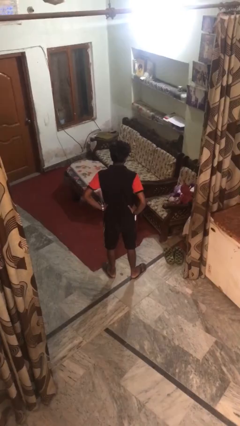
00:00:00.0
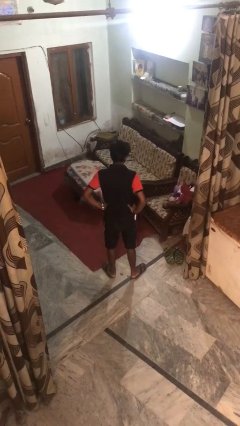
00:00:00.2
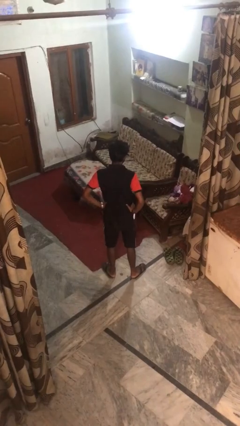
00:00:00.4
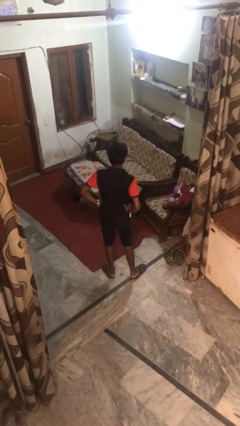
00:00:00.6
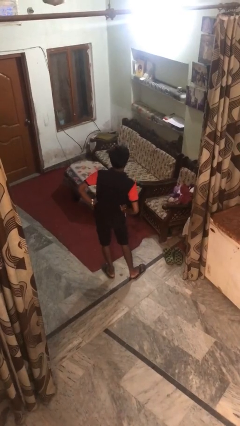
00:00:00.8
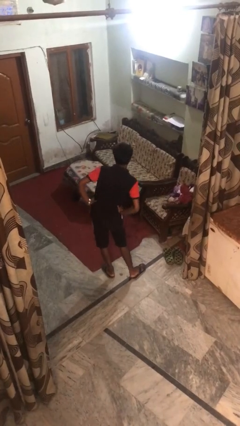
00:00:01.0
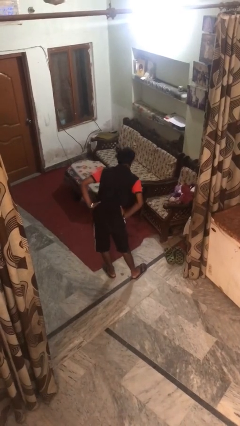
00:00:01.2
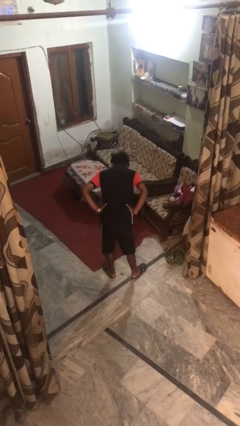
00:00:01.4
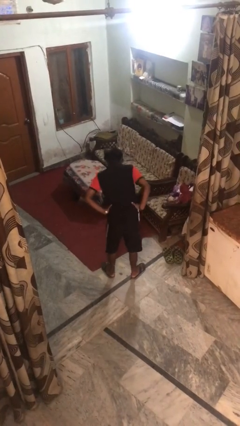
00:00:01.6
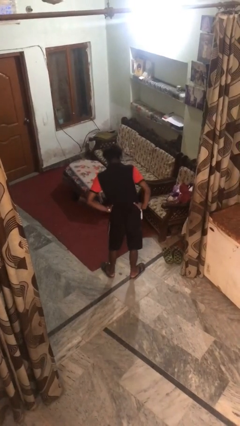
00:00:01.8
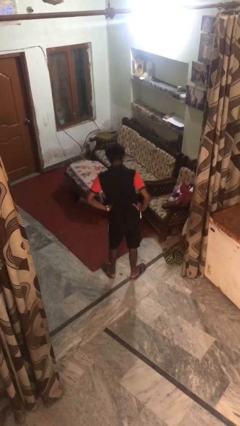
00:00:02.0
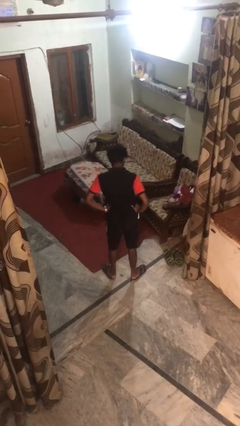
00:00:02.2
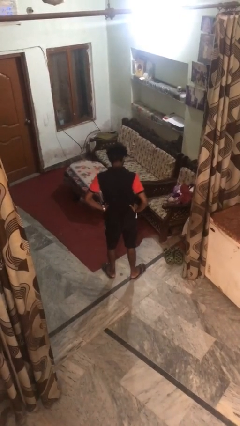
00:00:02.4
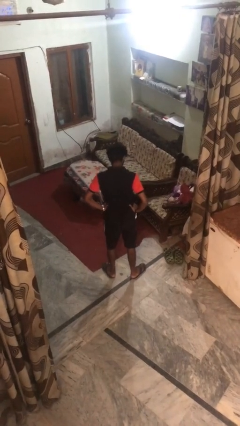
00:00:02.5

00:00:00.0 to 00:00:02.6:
person wiggles hips

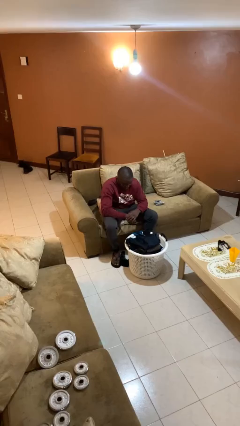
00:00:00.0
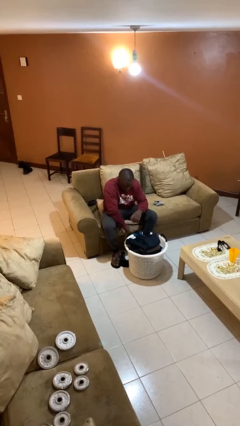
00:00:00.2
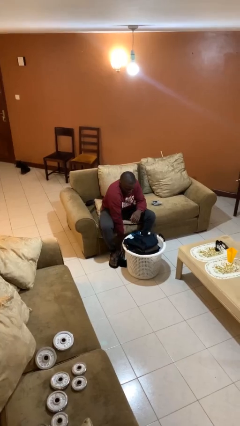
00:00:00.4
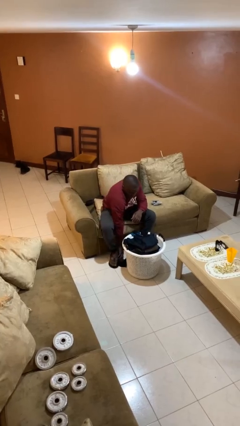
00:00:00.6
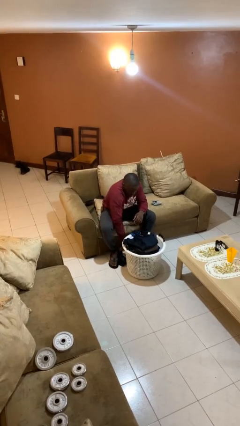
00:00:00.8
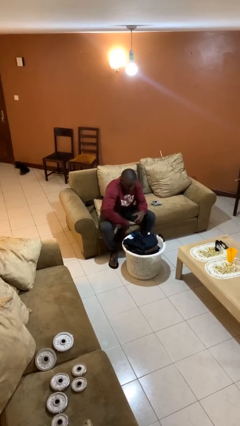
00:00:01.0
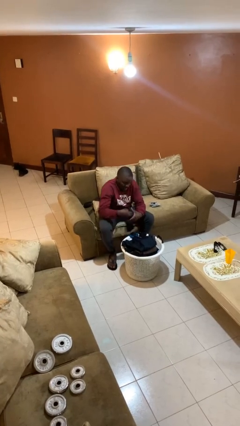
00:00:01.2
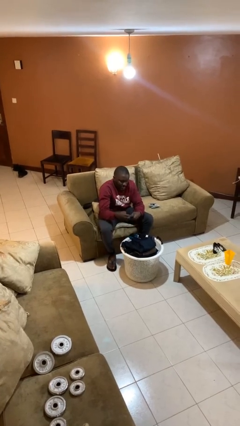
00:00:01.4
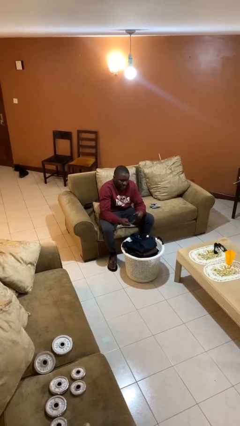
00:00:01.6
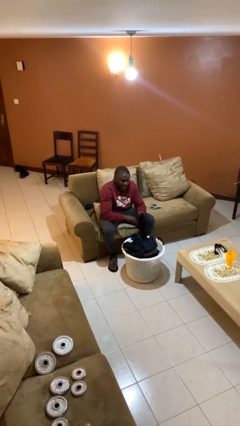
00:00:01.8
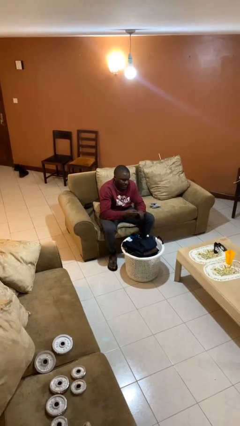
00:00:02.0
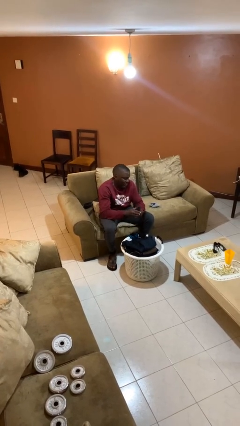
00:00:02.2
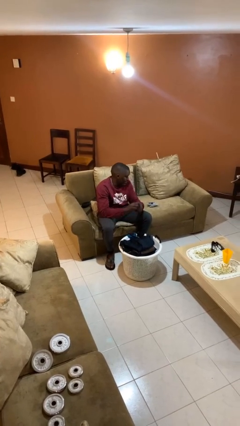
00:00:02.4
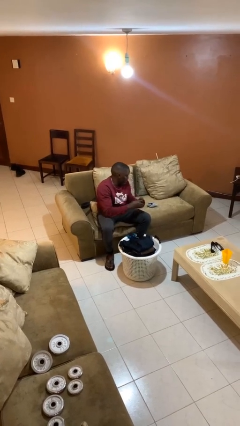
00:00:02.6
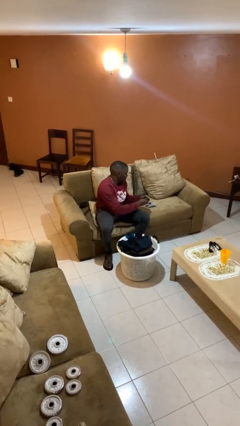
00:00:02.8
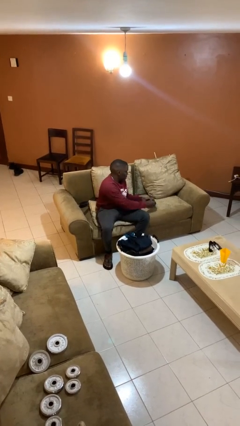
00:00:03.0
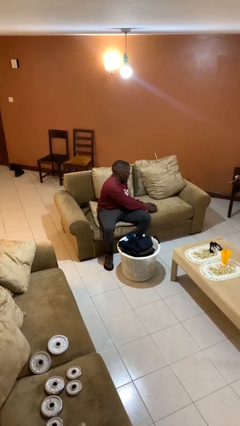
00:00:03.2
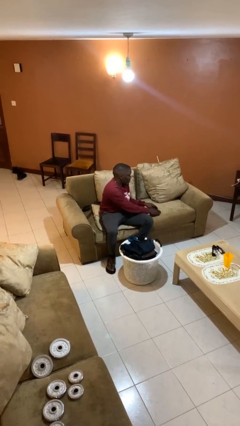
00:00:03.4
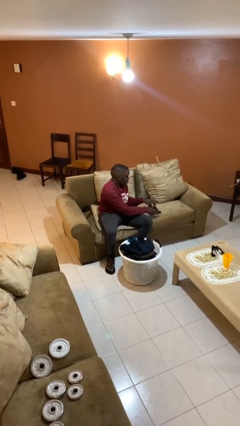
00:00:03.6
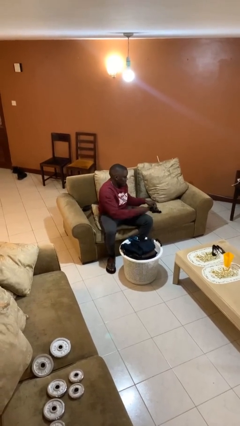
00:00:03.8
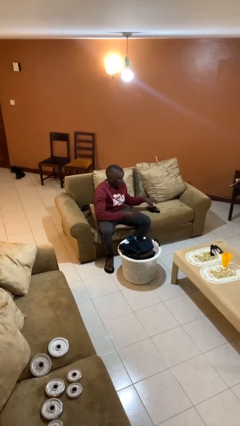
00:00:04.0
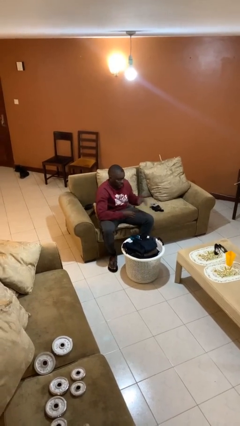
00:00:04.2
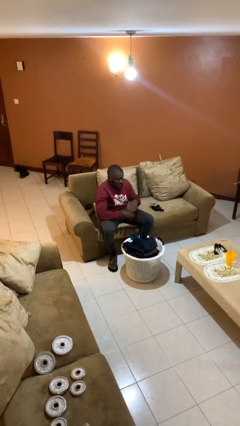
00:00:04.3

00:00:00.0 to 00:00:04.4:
person folds socks

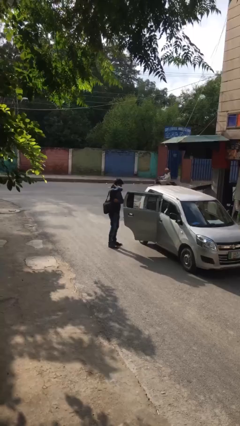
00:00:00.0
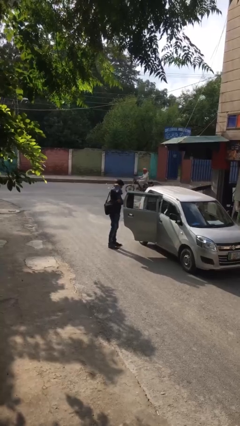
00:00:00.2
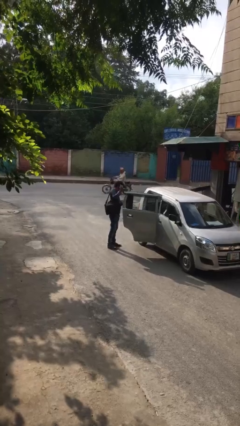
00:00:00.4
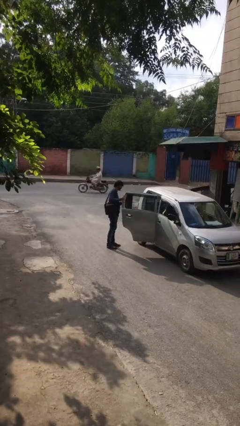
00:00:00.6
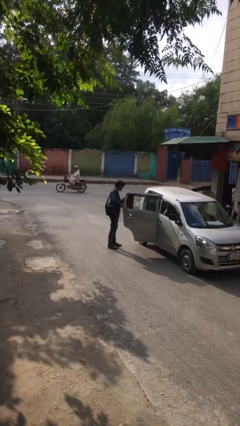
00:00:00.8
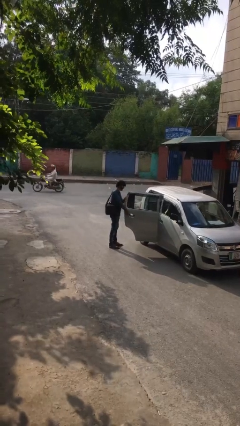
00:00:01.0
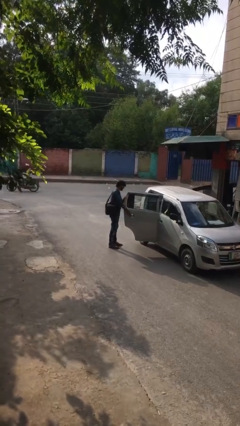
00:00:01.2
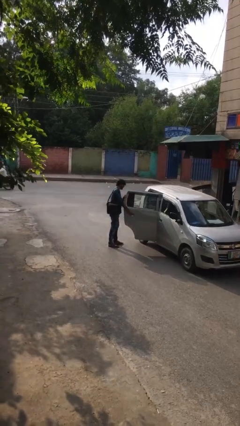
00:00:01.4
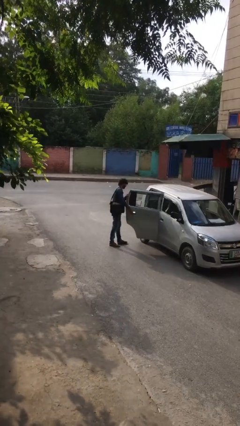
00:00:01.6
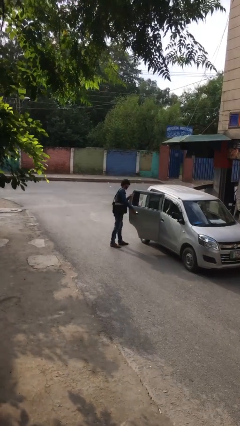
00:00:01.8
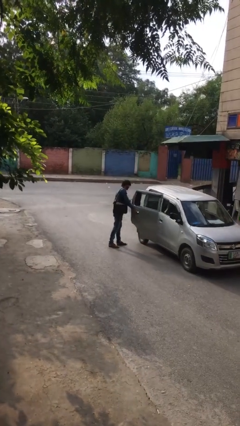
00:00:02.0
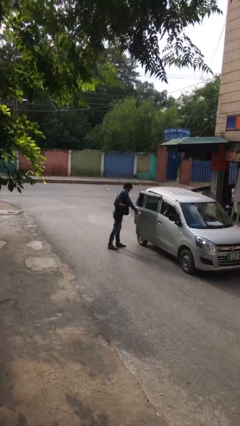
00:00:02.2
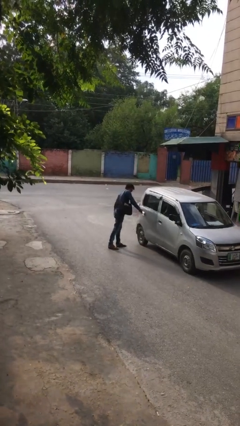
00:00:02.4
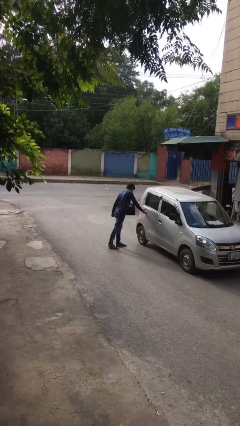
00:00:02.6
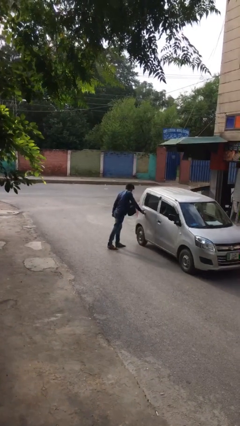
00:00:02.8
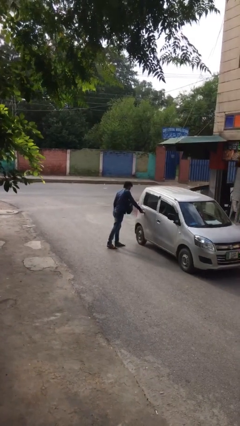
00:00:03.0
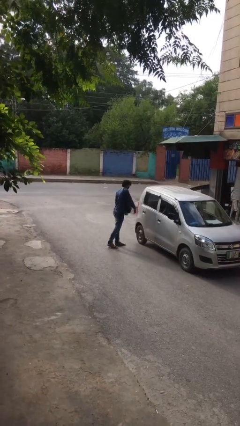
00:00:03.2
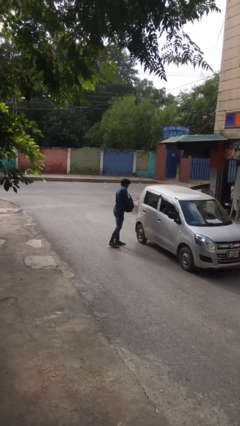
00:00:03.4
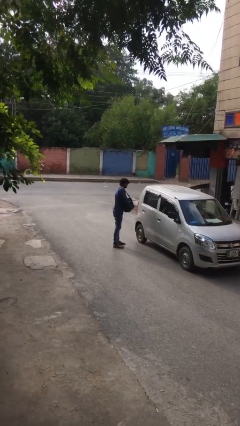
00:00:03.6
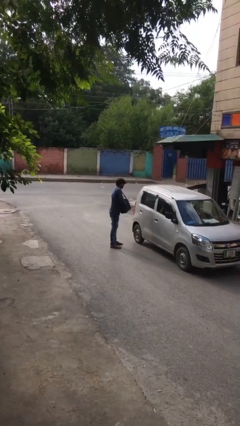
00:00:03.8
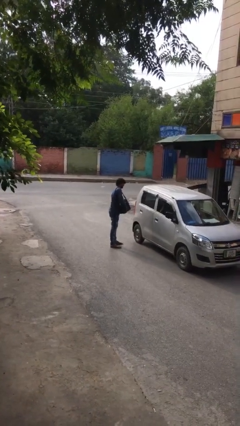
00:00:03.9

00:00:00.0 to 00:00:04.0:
person closes car door

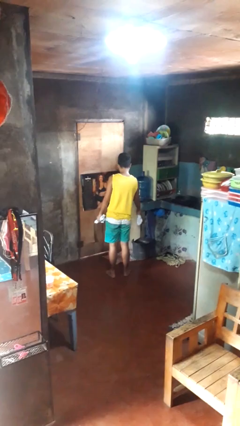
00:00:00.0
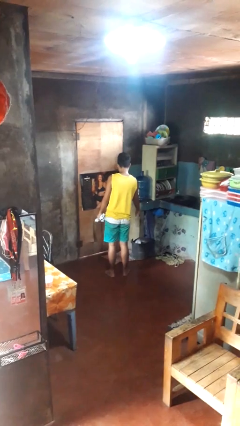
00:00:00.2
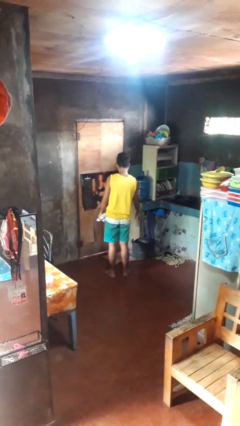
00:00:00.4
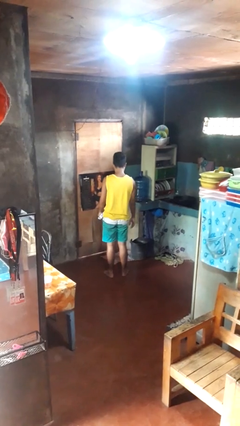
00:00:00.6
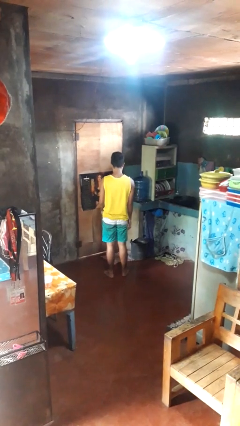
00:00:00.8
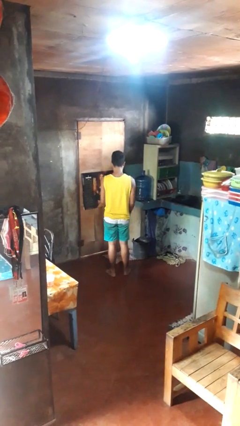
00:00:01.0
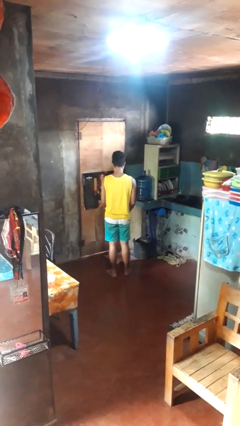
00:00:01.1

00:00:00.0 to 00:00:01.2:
person discards trash

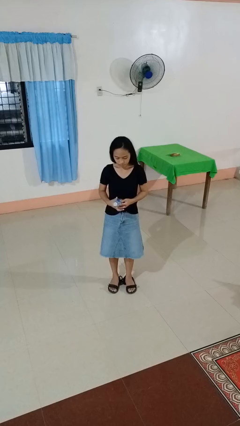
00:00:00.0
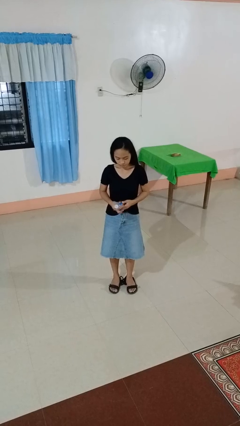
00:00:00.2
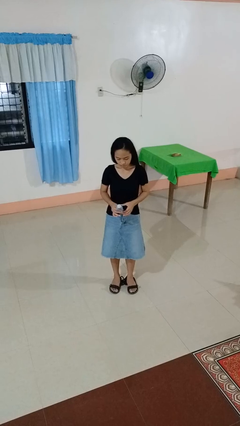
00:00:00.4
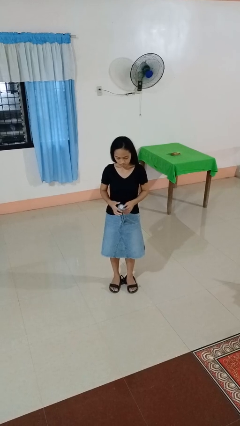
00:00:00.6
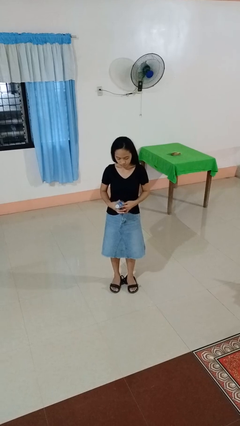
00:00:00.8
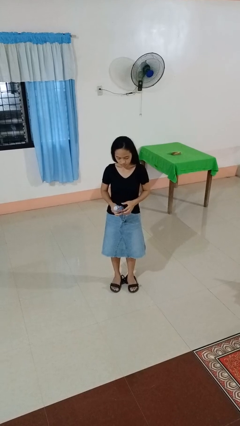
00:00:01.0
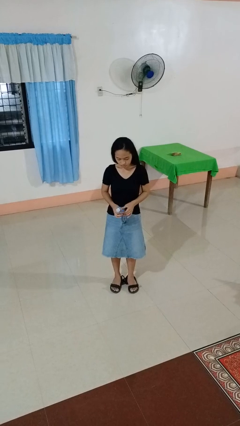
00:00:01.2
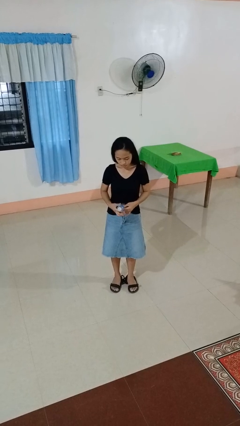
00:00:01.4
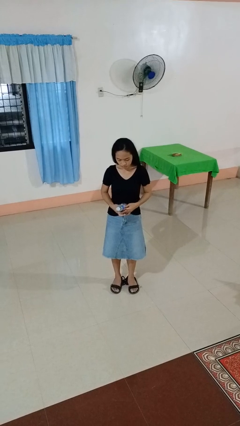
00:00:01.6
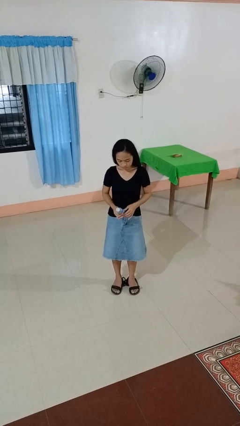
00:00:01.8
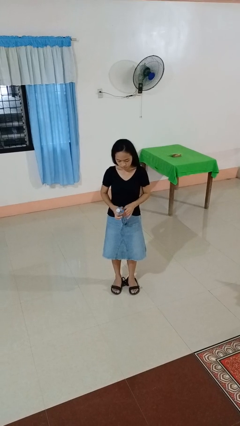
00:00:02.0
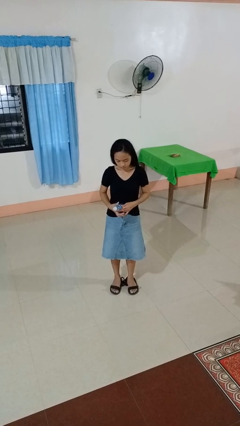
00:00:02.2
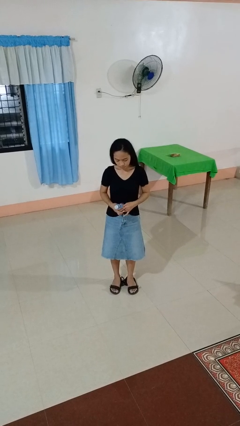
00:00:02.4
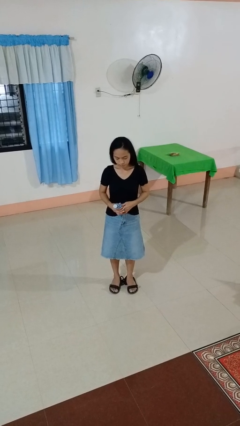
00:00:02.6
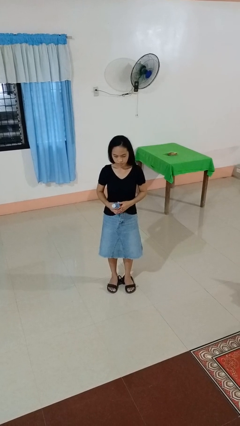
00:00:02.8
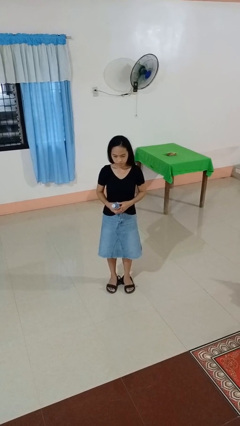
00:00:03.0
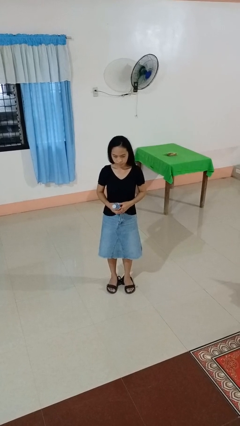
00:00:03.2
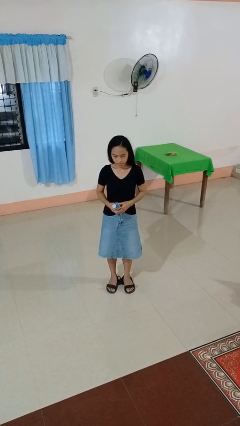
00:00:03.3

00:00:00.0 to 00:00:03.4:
person squeezes object

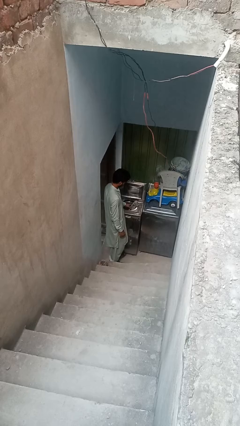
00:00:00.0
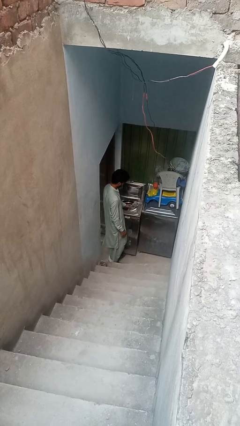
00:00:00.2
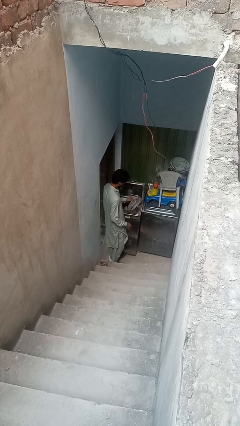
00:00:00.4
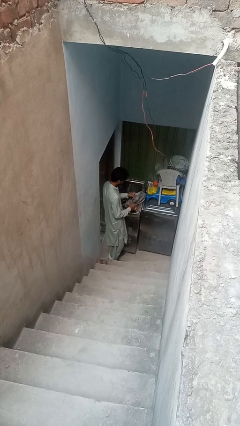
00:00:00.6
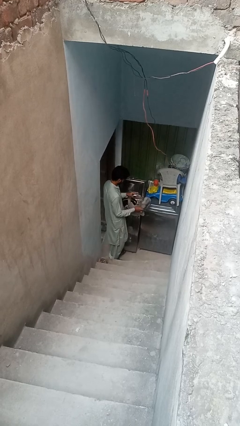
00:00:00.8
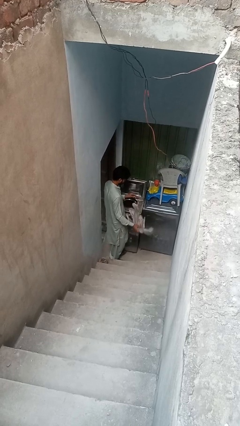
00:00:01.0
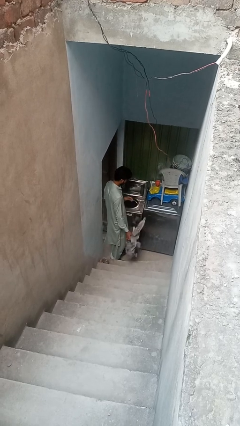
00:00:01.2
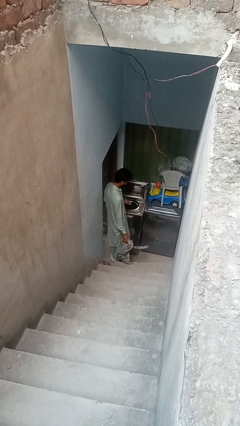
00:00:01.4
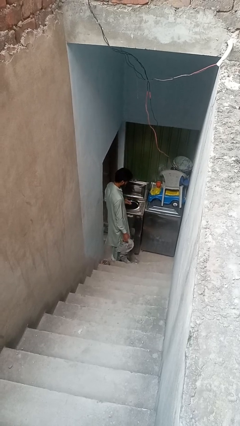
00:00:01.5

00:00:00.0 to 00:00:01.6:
person unloads clotheswasher

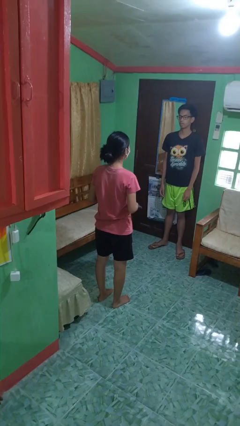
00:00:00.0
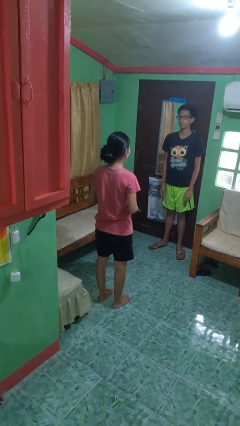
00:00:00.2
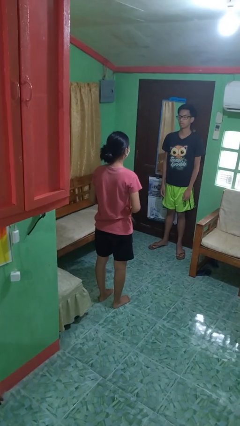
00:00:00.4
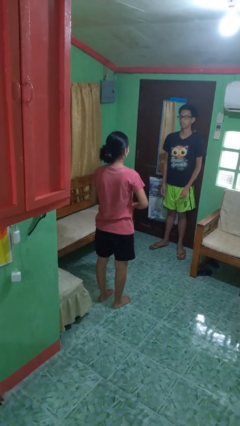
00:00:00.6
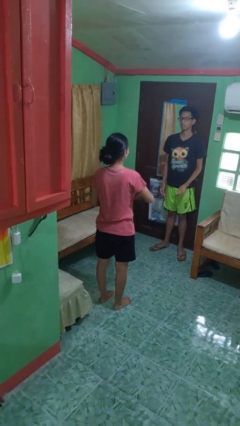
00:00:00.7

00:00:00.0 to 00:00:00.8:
person throws object to person
